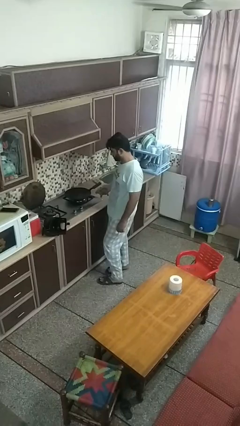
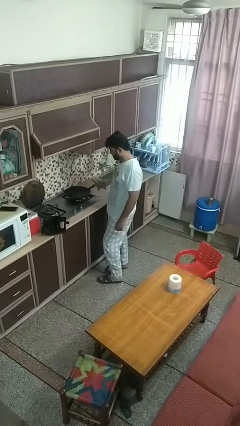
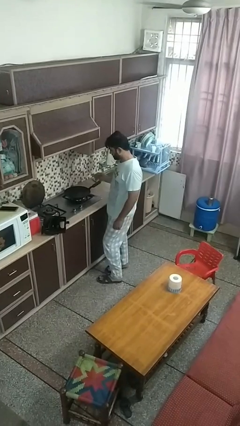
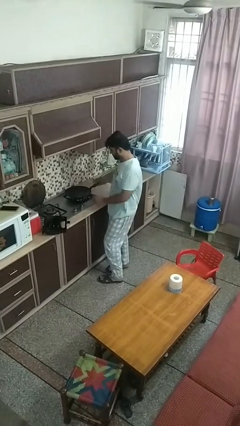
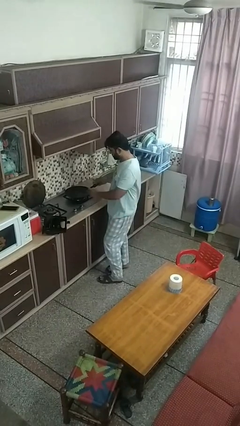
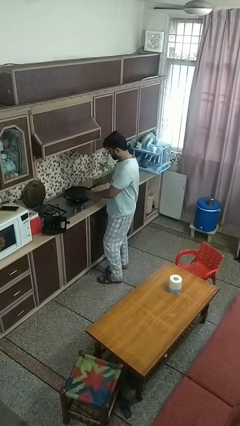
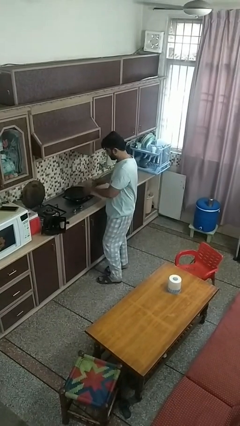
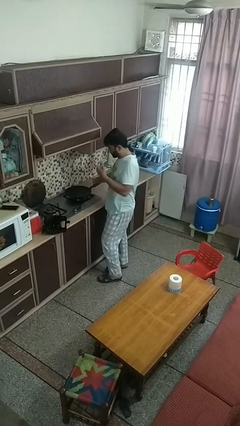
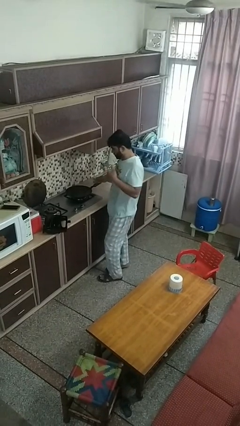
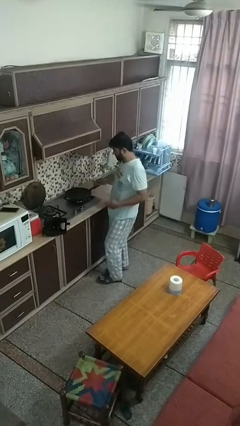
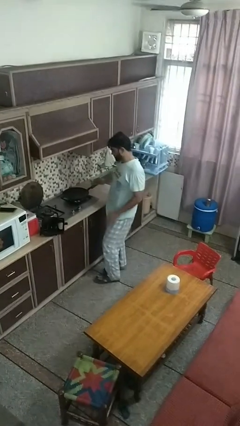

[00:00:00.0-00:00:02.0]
person burns hand

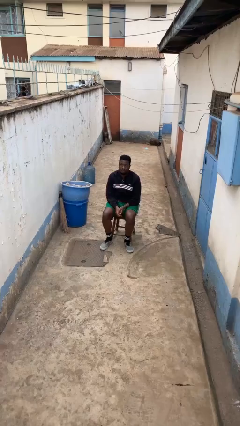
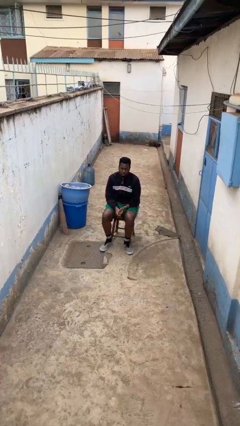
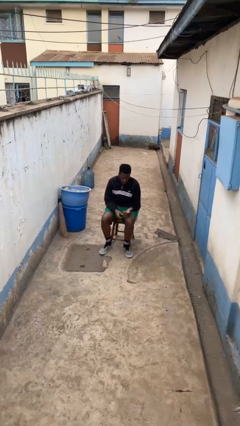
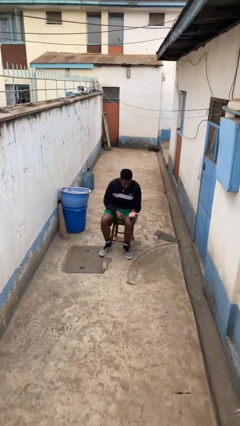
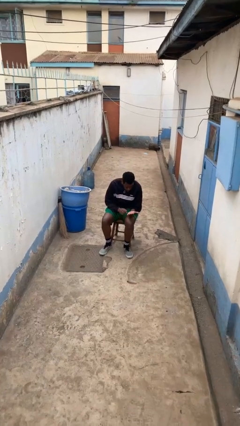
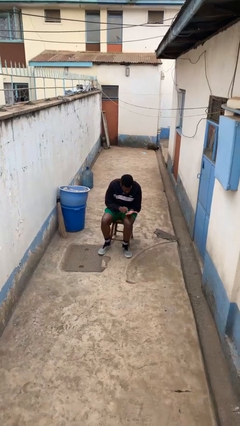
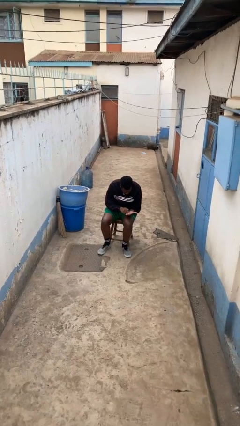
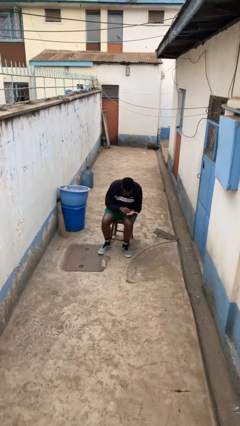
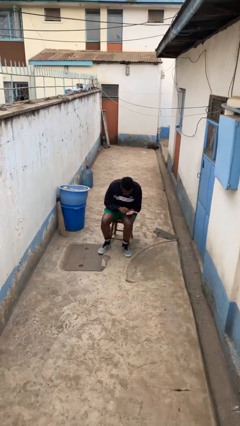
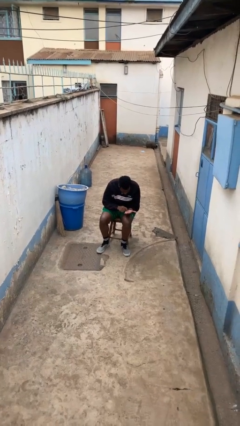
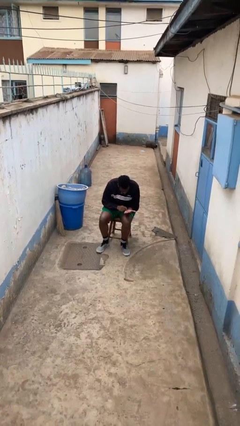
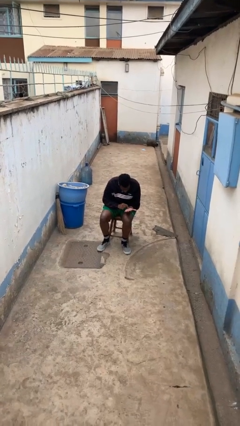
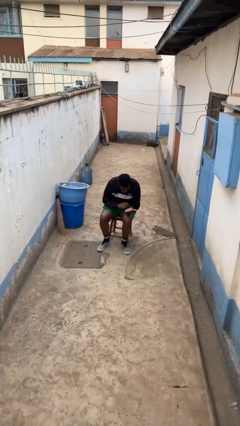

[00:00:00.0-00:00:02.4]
person looks at hands in lap

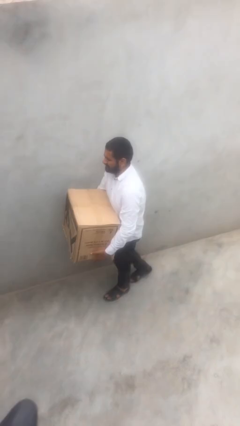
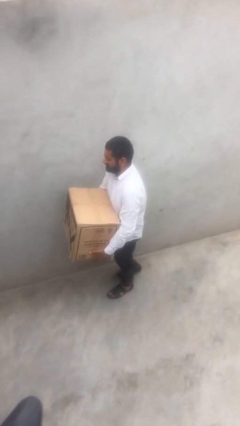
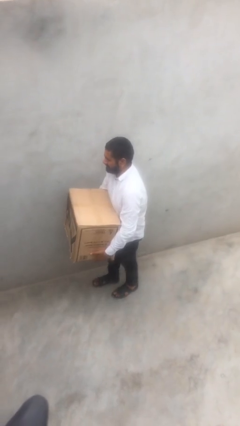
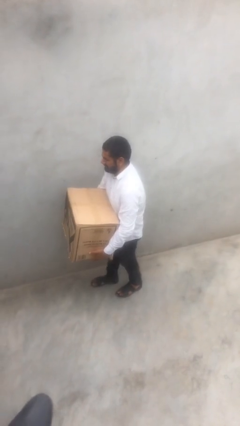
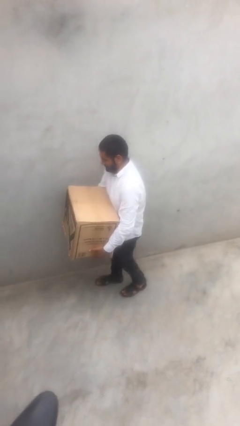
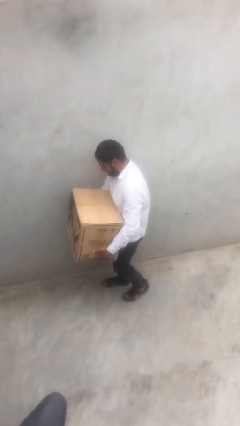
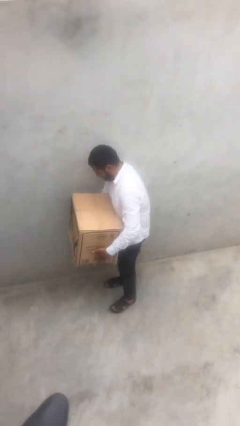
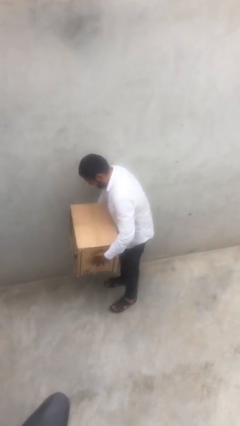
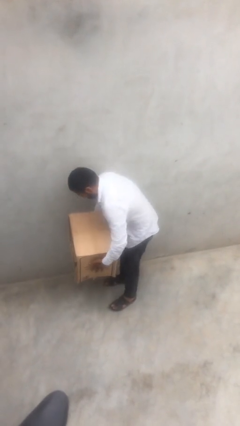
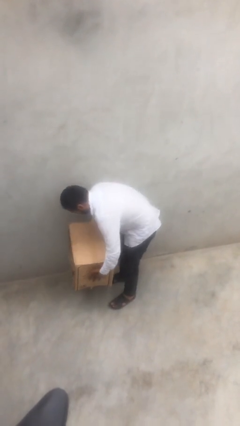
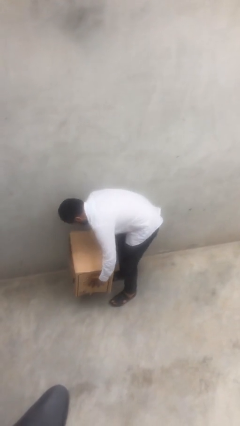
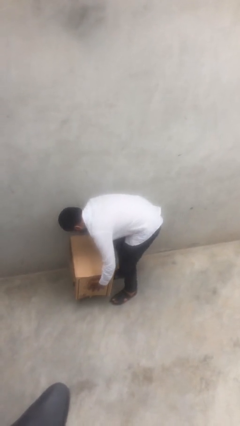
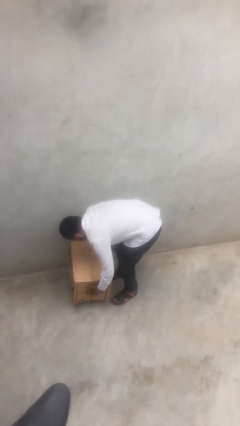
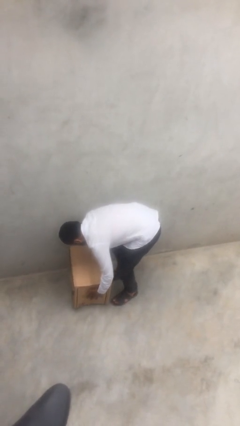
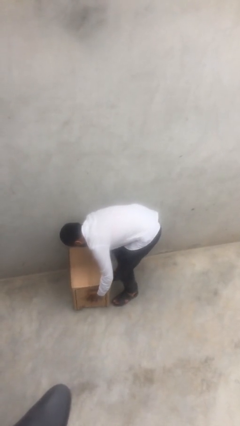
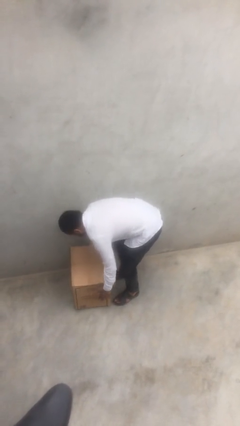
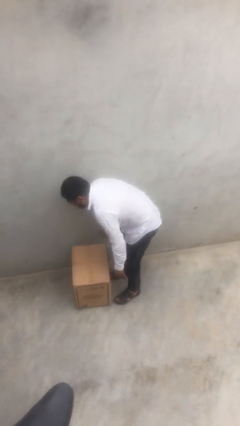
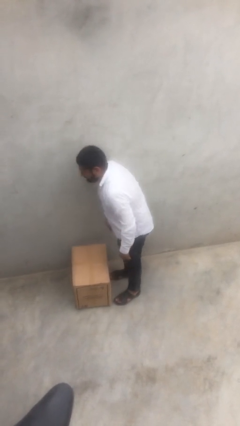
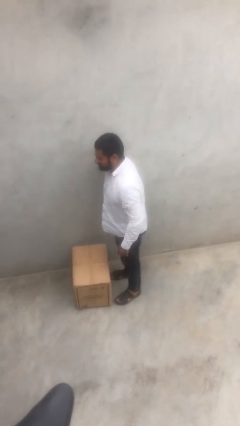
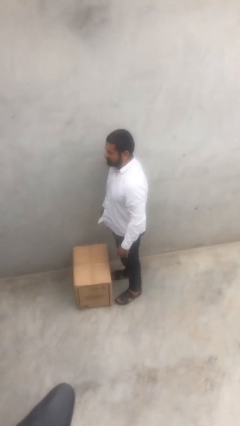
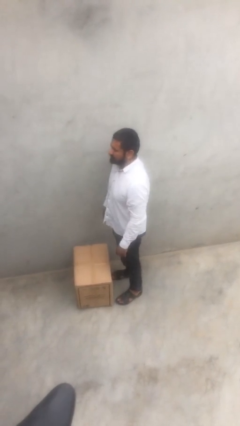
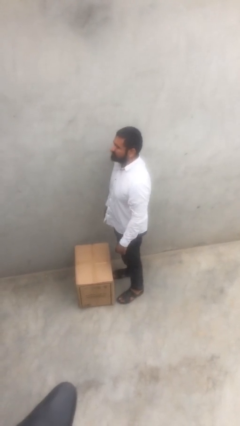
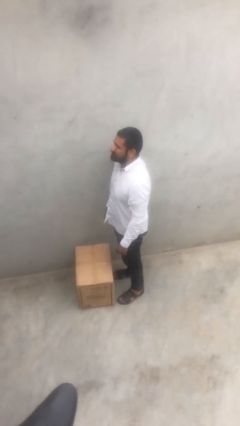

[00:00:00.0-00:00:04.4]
person puts down object on floor

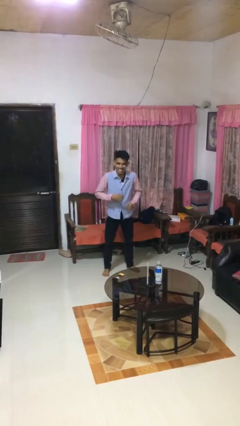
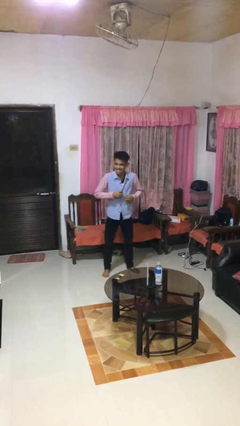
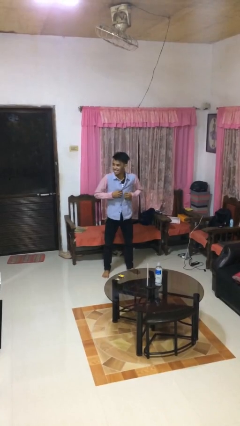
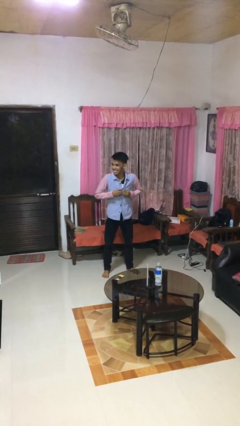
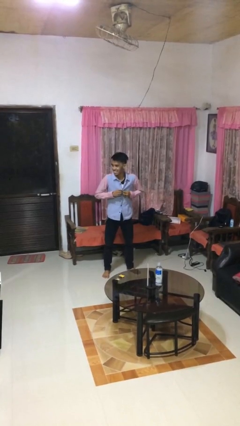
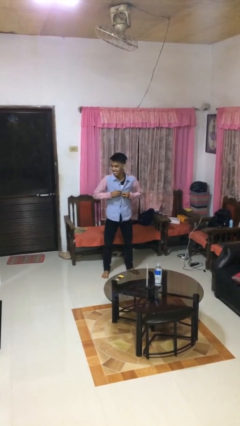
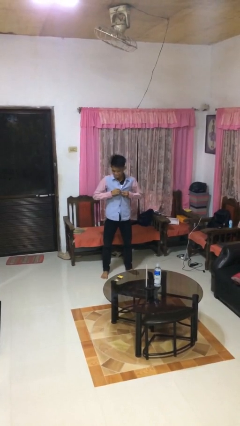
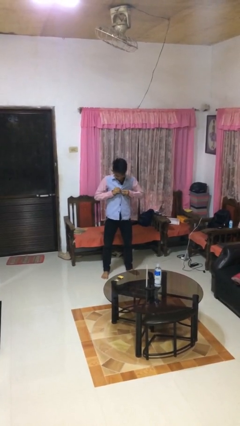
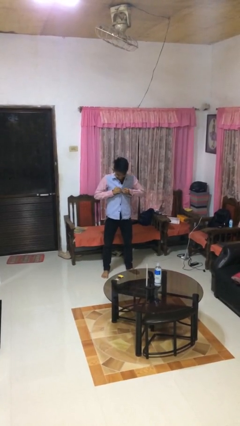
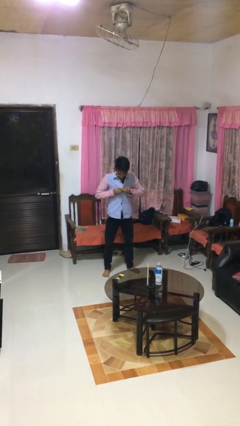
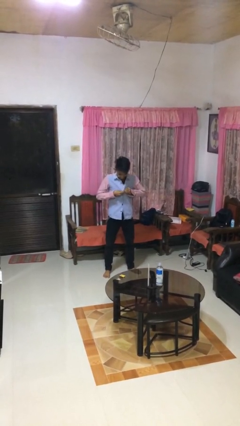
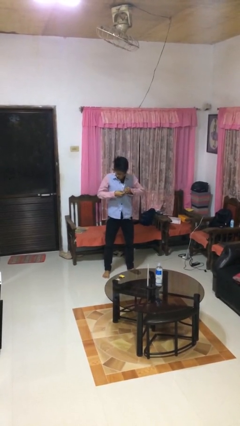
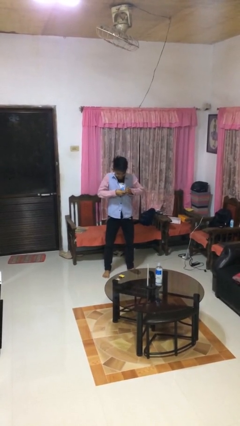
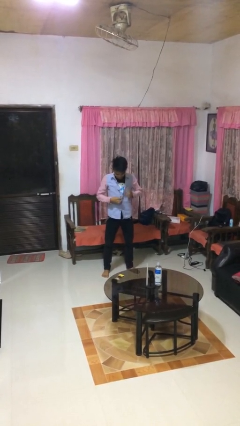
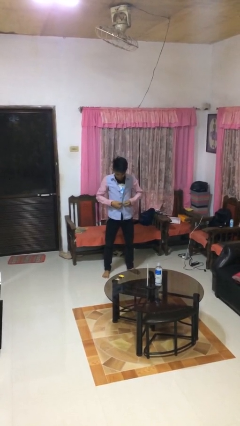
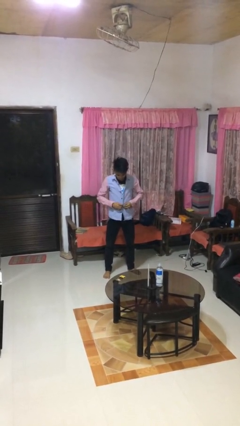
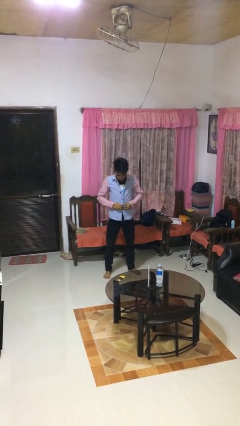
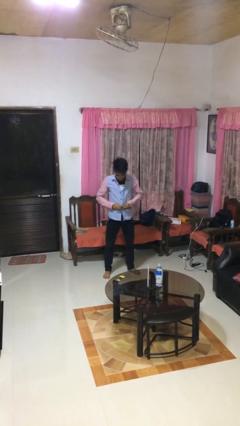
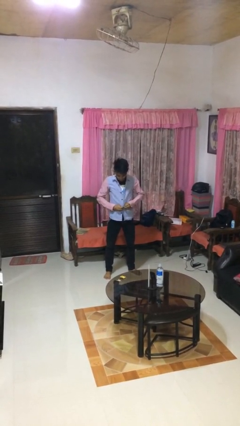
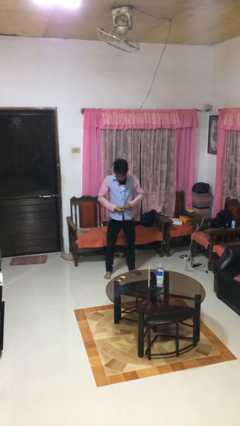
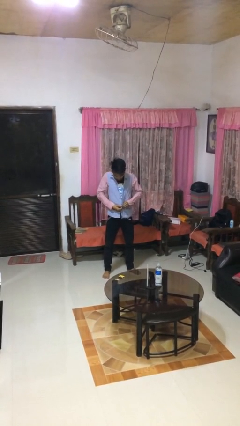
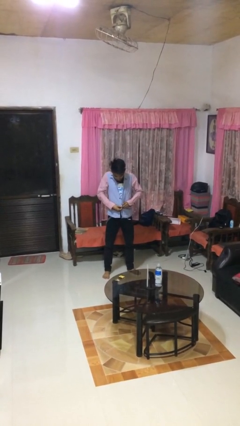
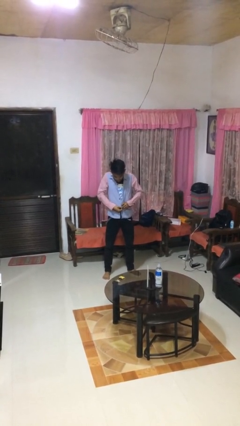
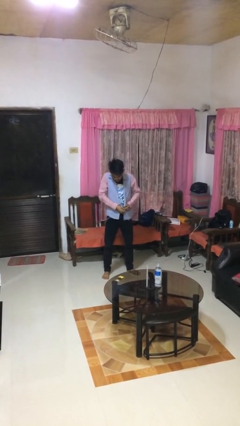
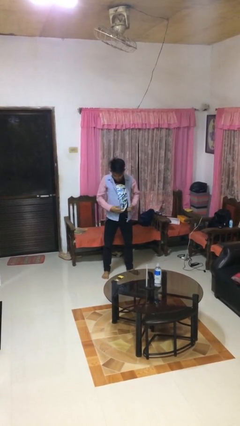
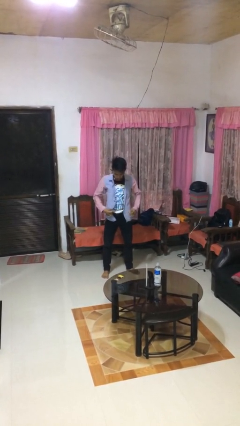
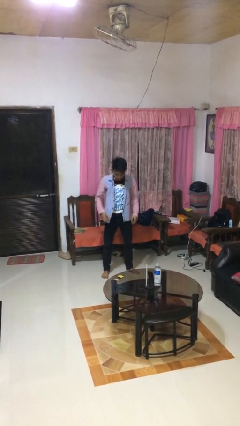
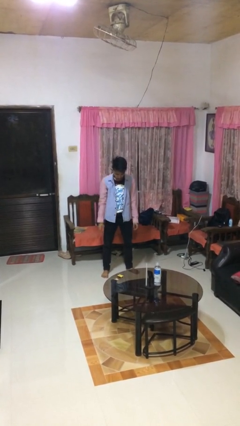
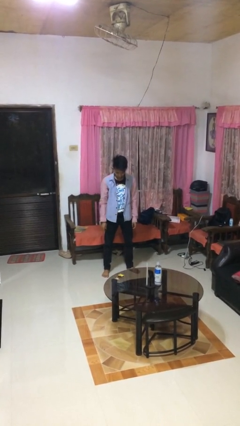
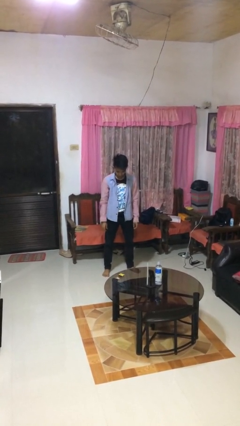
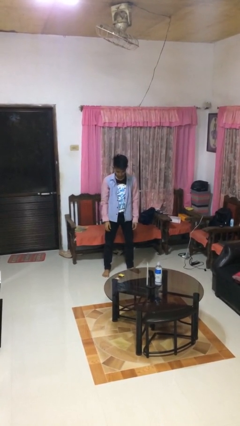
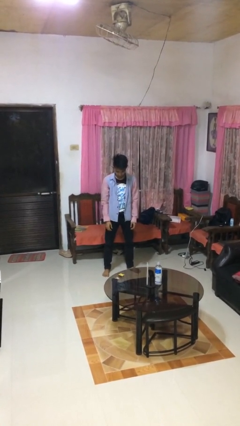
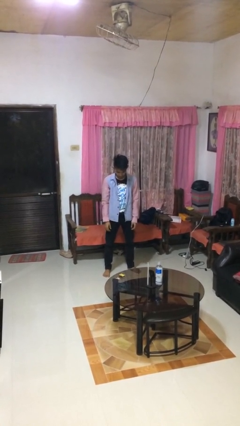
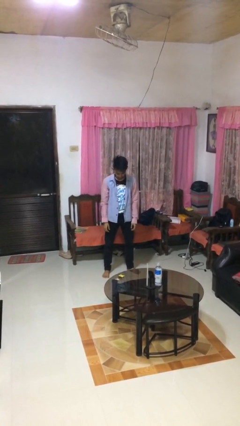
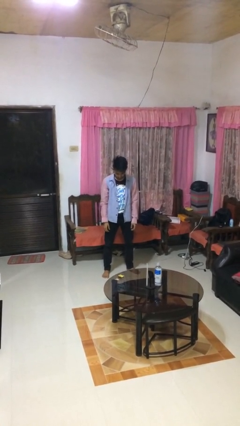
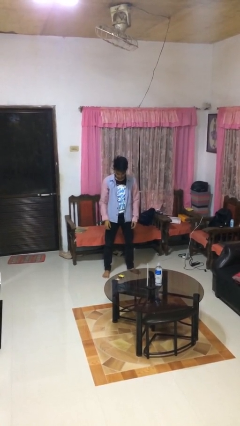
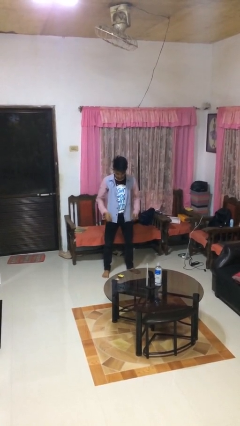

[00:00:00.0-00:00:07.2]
person unbuttons shirt

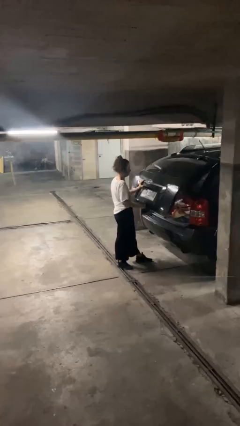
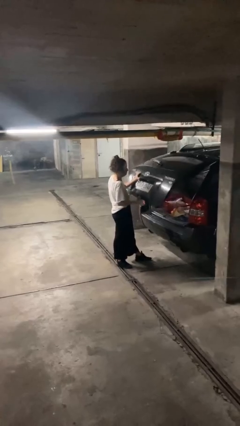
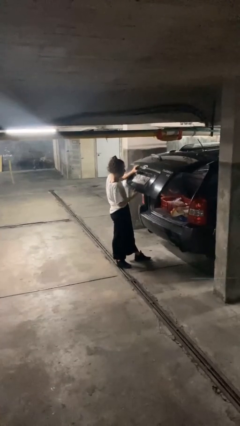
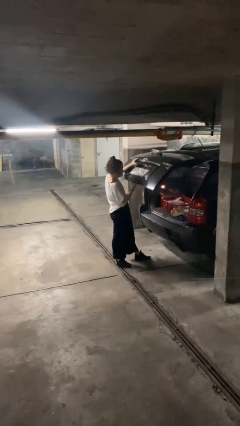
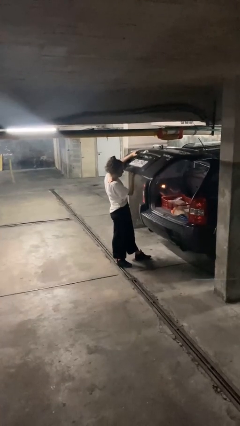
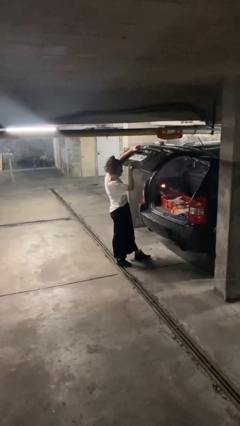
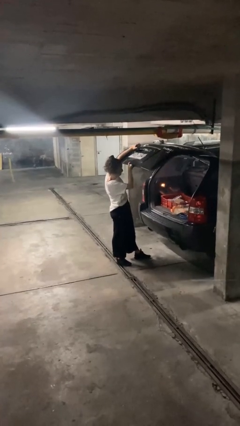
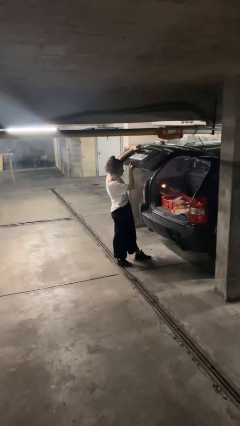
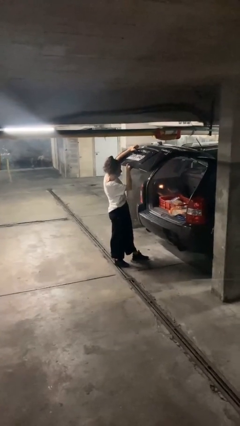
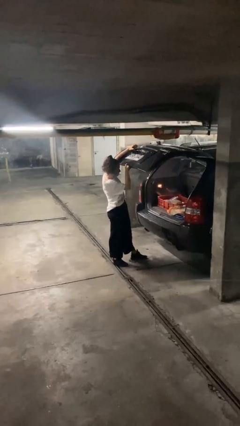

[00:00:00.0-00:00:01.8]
person opens car trunk
